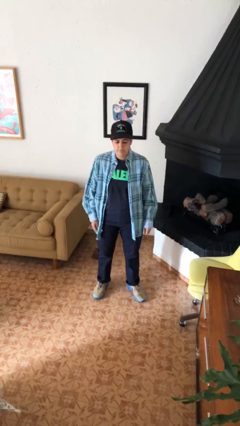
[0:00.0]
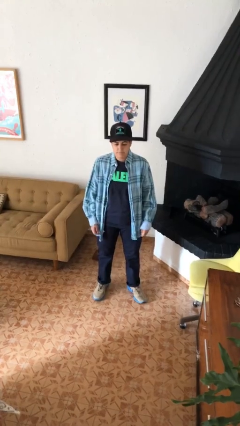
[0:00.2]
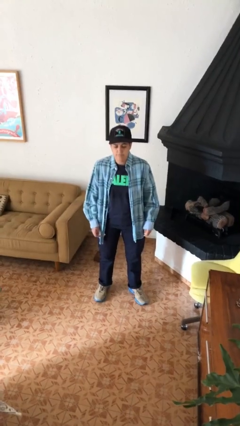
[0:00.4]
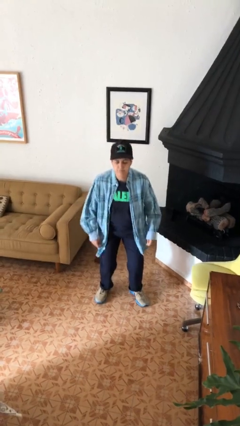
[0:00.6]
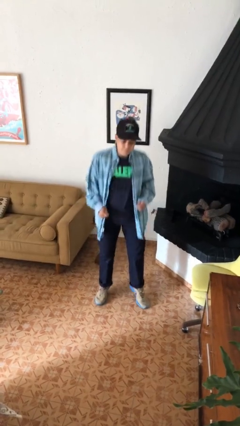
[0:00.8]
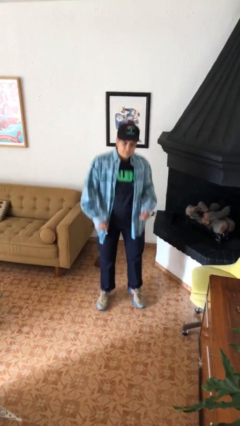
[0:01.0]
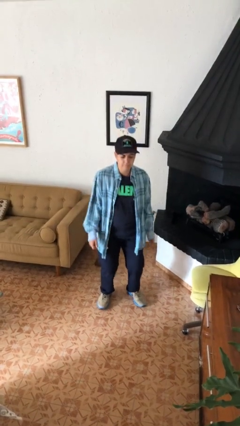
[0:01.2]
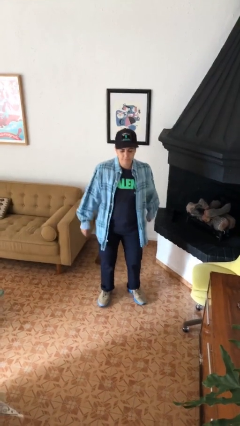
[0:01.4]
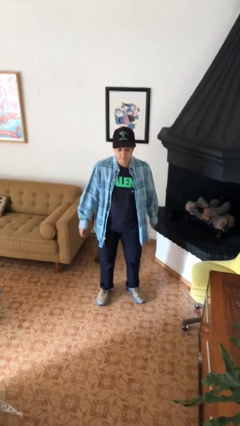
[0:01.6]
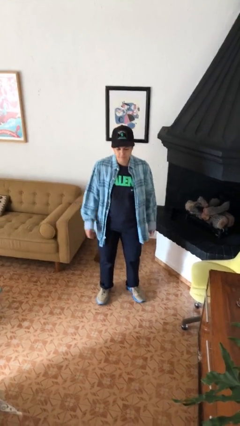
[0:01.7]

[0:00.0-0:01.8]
person jumps

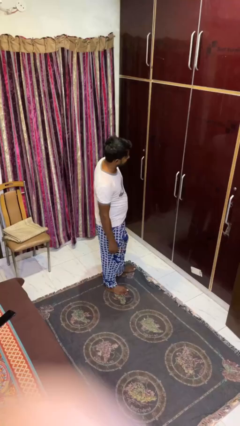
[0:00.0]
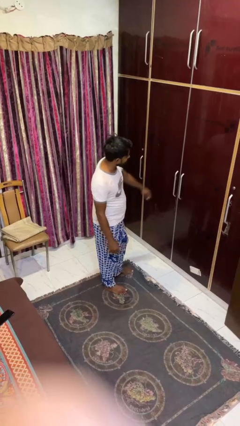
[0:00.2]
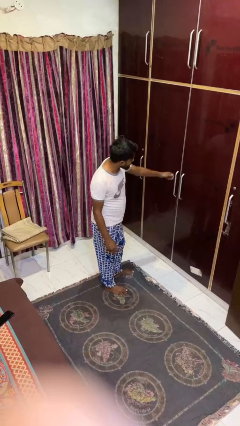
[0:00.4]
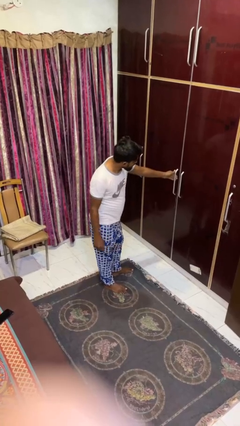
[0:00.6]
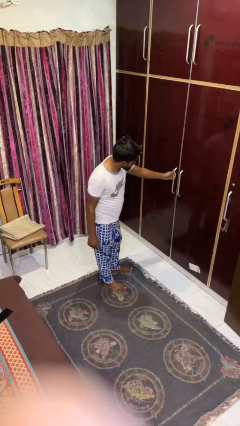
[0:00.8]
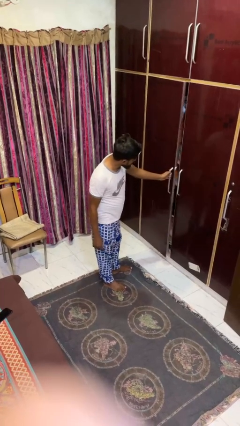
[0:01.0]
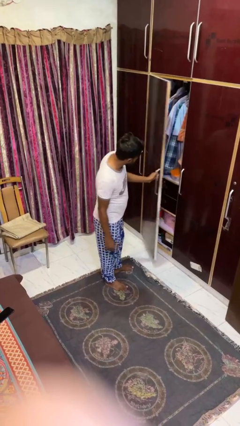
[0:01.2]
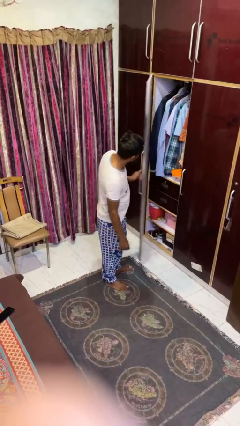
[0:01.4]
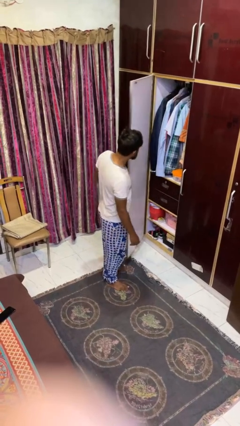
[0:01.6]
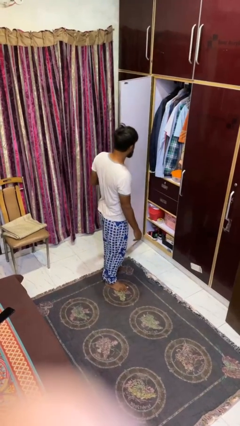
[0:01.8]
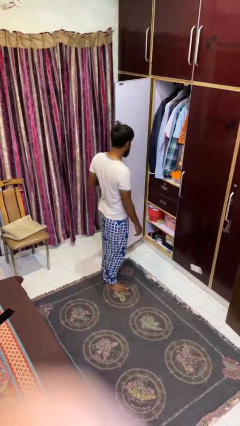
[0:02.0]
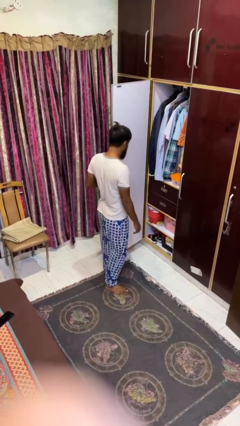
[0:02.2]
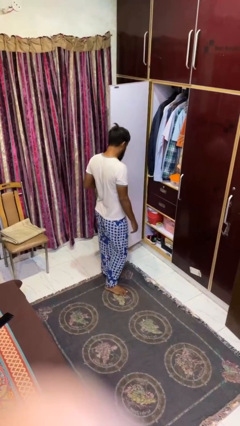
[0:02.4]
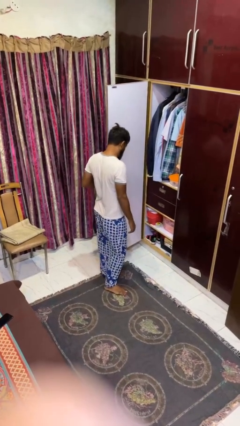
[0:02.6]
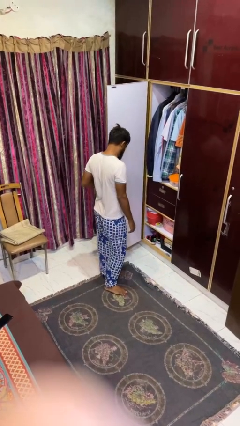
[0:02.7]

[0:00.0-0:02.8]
person opens closet door

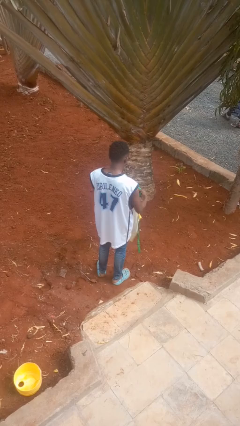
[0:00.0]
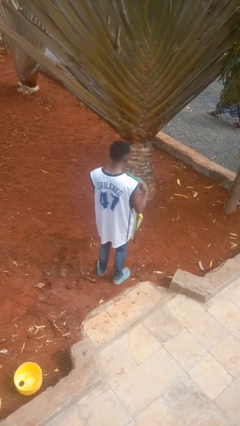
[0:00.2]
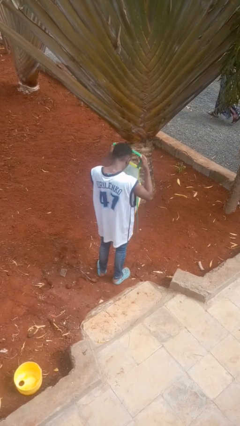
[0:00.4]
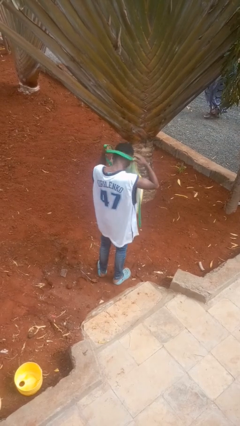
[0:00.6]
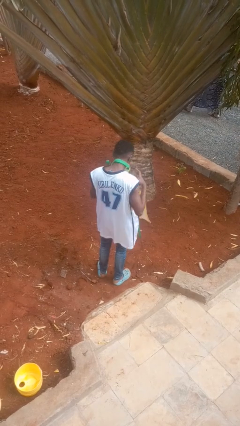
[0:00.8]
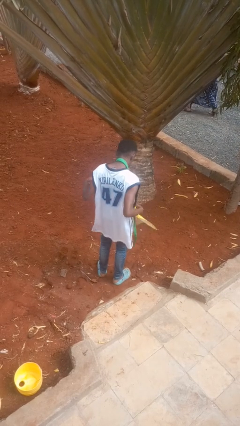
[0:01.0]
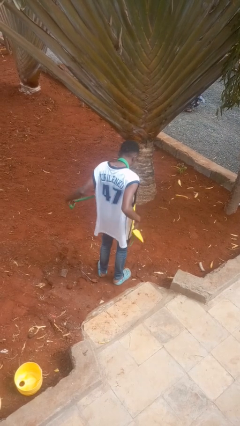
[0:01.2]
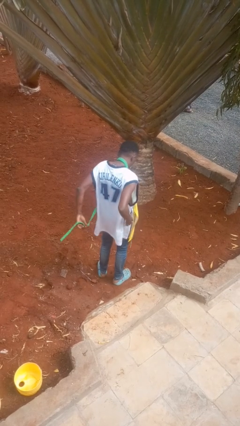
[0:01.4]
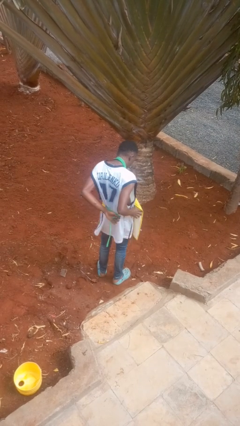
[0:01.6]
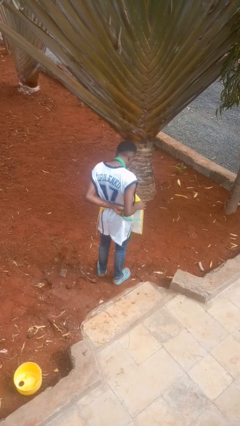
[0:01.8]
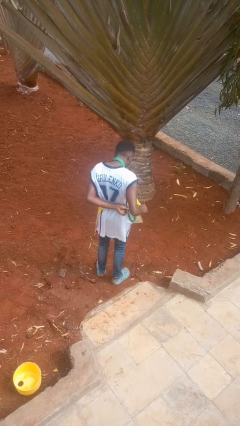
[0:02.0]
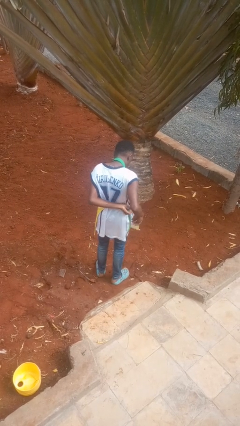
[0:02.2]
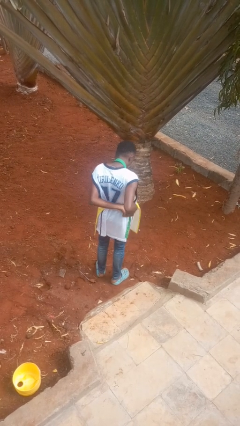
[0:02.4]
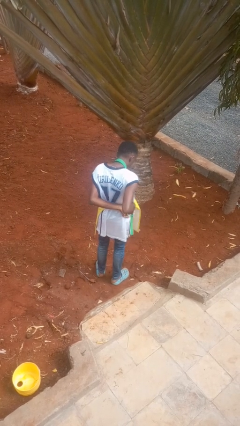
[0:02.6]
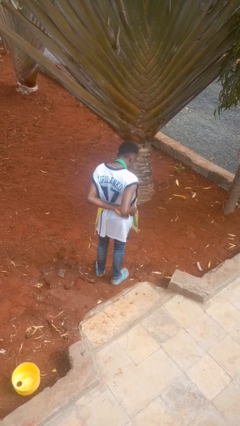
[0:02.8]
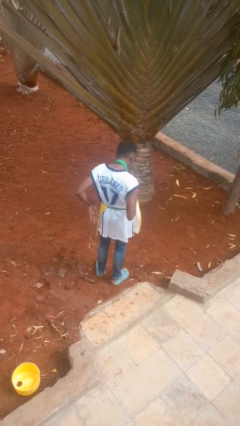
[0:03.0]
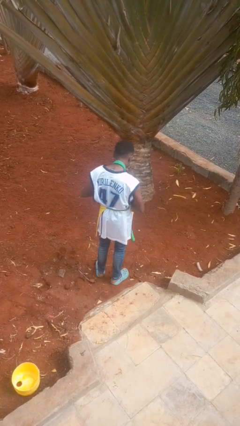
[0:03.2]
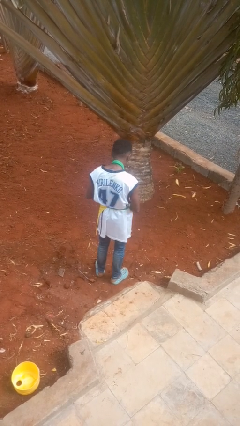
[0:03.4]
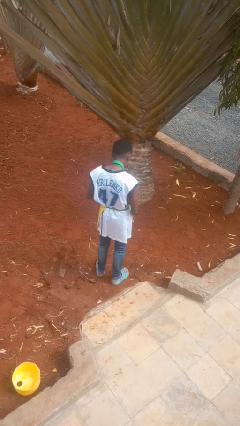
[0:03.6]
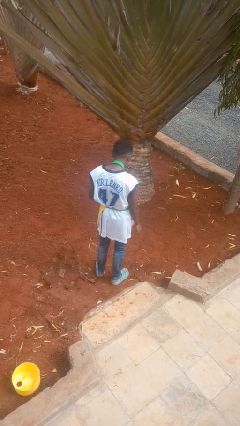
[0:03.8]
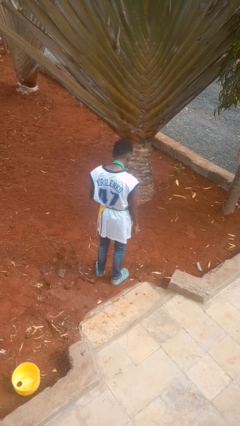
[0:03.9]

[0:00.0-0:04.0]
person puts on apron

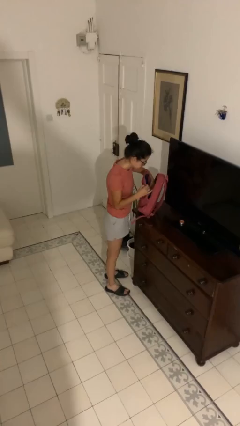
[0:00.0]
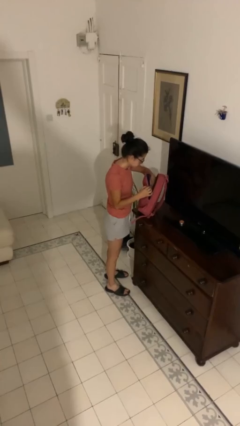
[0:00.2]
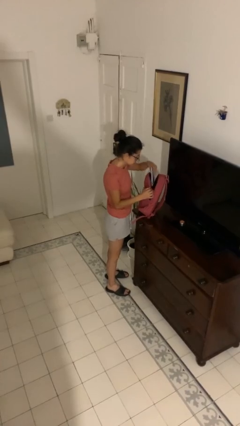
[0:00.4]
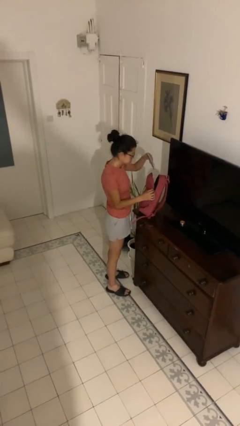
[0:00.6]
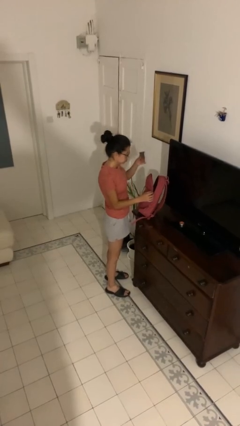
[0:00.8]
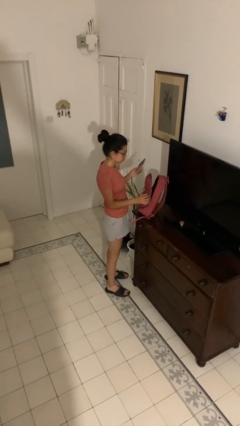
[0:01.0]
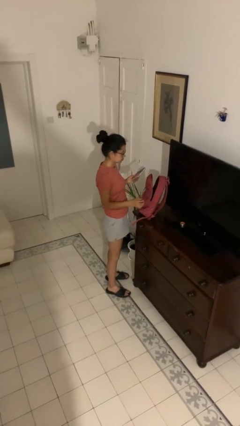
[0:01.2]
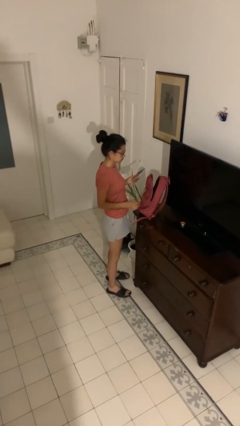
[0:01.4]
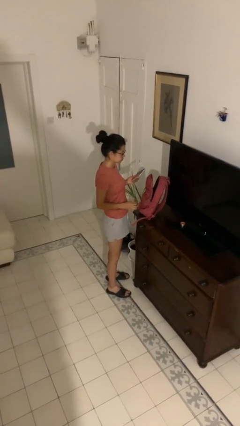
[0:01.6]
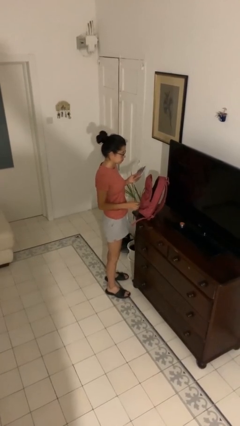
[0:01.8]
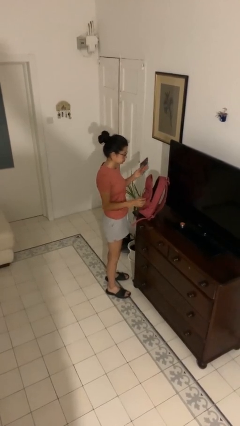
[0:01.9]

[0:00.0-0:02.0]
person takes object from backpack

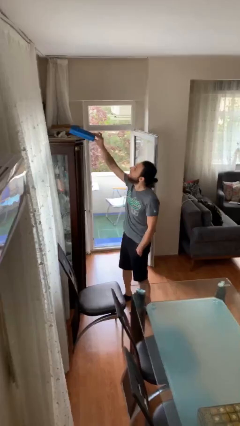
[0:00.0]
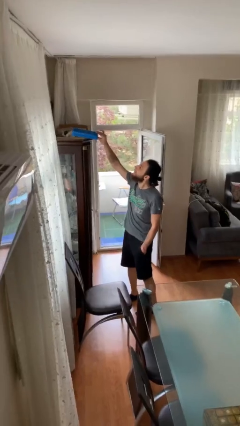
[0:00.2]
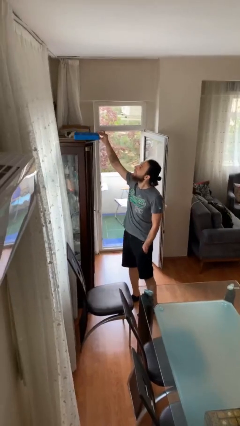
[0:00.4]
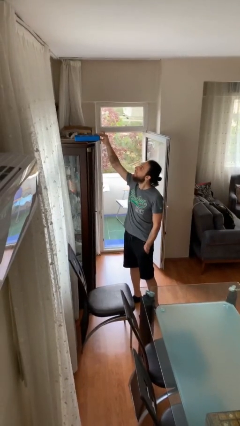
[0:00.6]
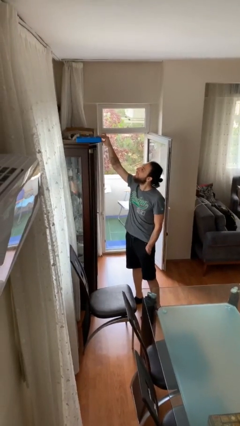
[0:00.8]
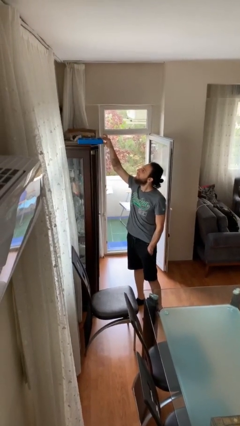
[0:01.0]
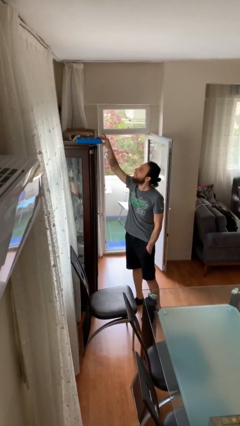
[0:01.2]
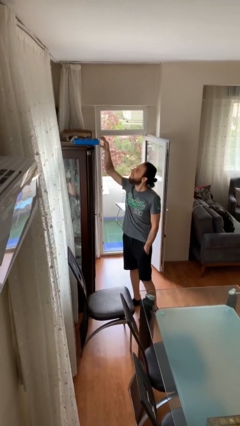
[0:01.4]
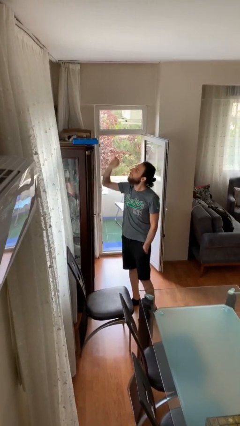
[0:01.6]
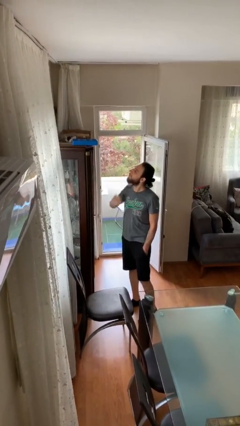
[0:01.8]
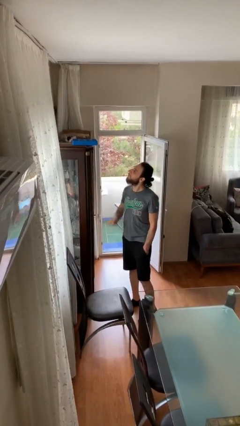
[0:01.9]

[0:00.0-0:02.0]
person puts down object on shelf

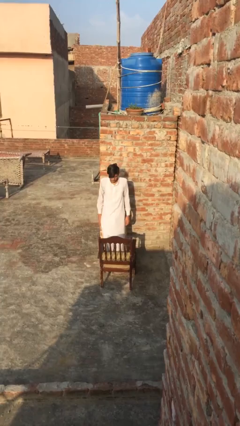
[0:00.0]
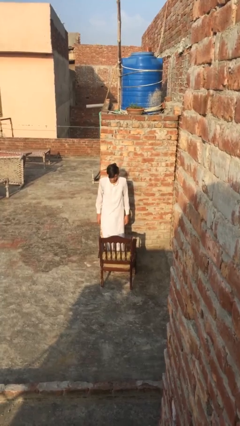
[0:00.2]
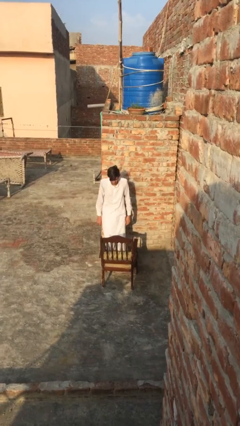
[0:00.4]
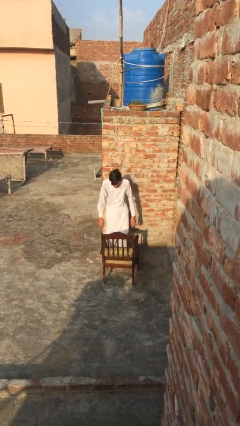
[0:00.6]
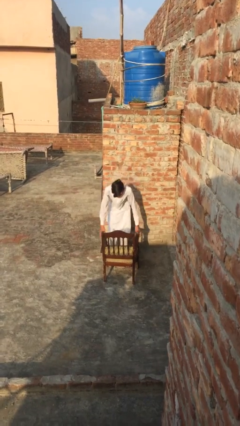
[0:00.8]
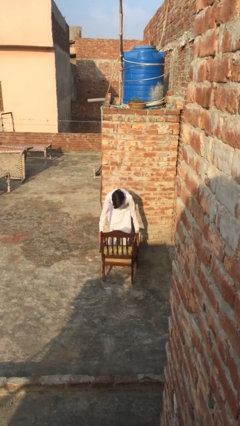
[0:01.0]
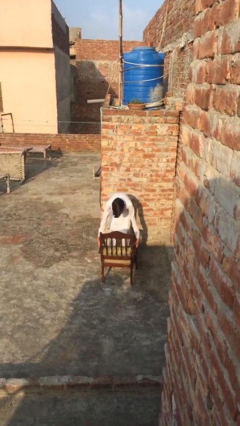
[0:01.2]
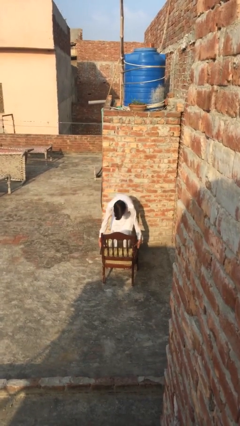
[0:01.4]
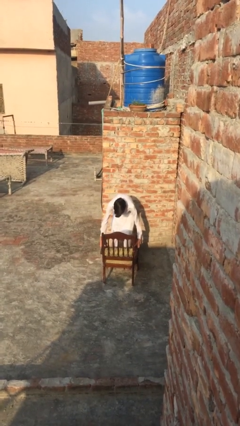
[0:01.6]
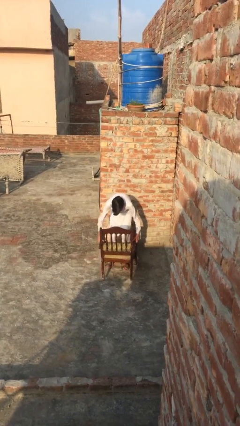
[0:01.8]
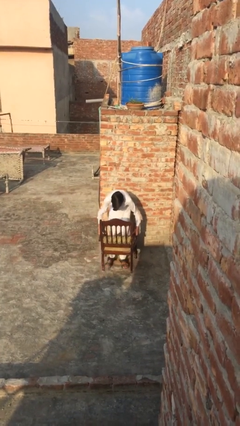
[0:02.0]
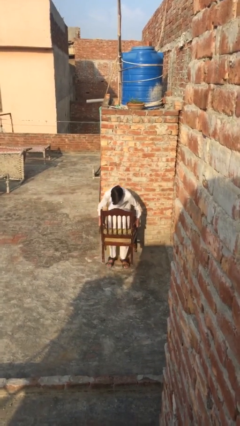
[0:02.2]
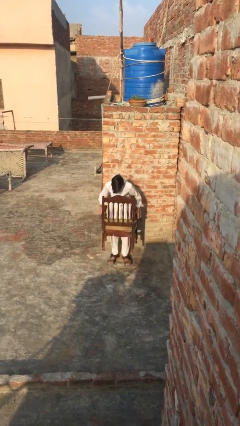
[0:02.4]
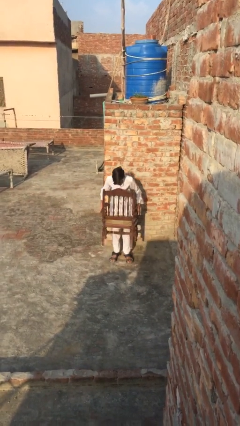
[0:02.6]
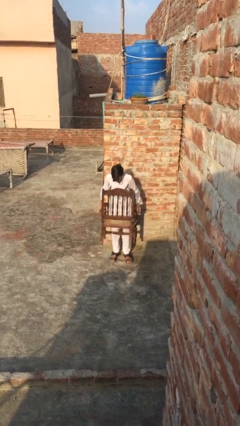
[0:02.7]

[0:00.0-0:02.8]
person picks up object from floor

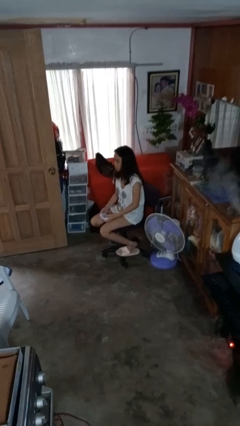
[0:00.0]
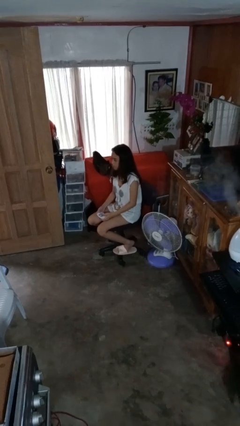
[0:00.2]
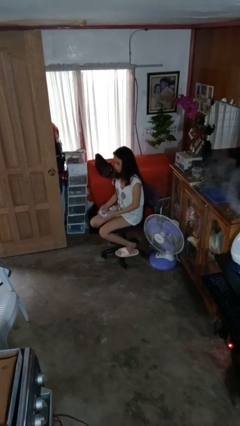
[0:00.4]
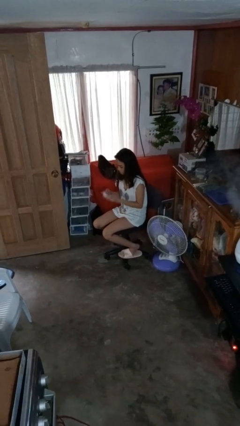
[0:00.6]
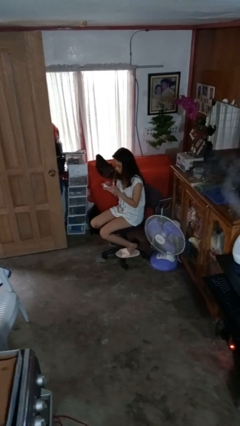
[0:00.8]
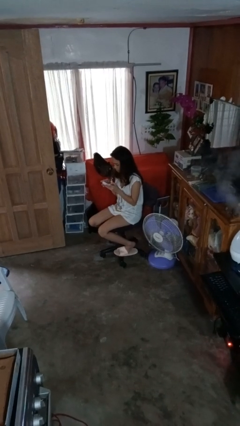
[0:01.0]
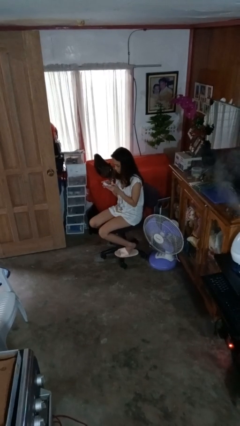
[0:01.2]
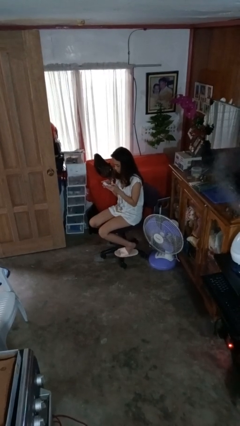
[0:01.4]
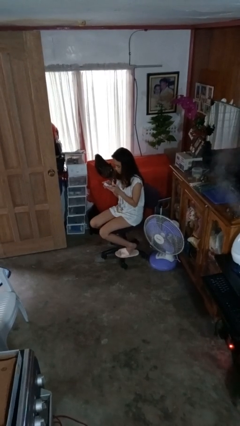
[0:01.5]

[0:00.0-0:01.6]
person interacts with handheld game
